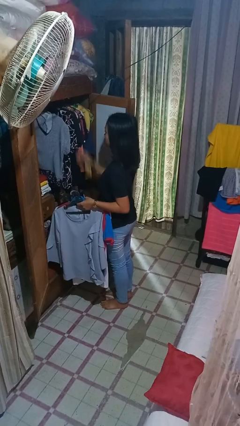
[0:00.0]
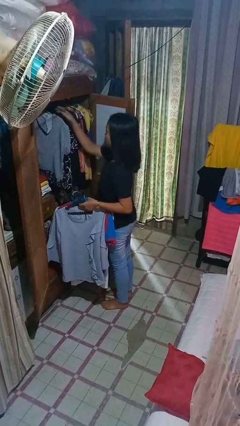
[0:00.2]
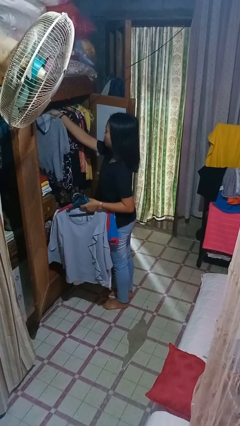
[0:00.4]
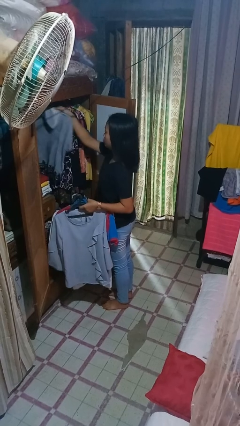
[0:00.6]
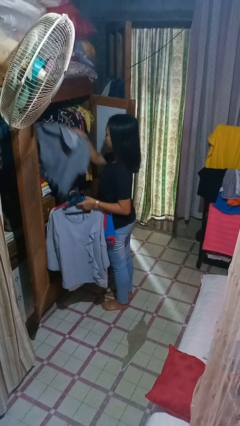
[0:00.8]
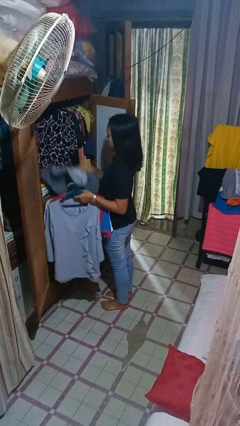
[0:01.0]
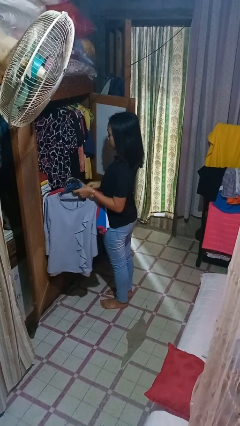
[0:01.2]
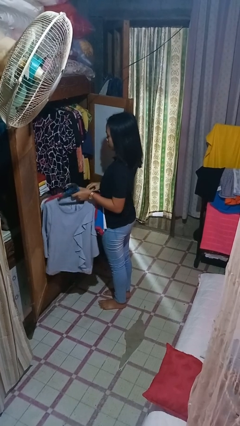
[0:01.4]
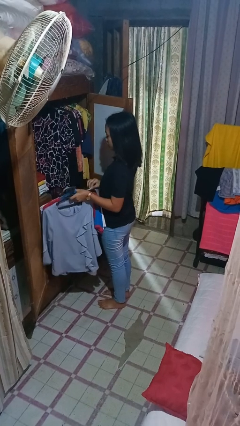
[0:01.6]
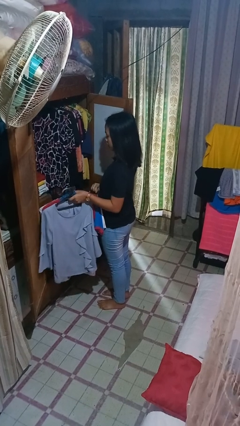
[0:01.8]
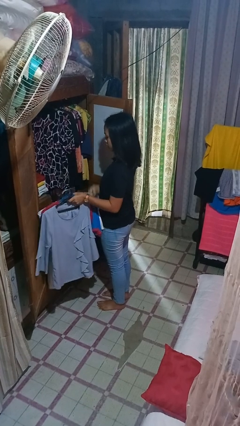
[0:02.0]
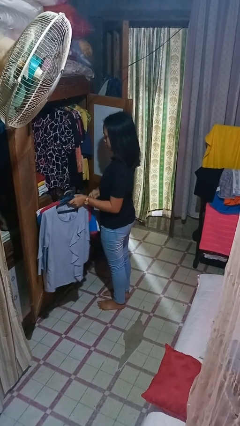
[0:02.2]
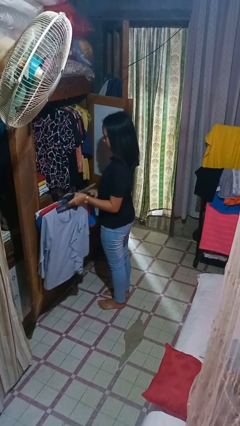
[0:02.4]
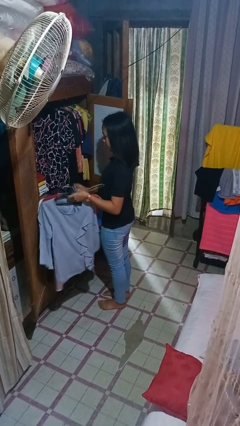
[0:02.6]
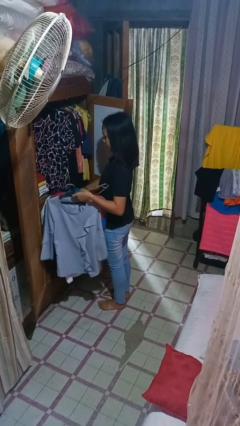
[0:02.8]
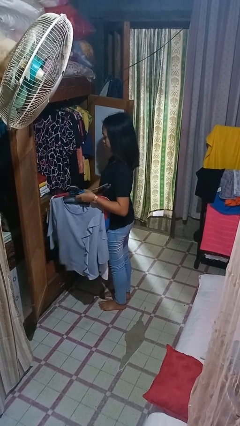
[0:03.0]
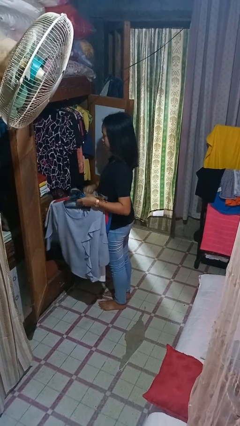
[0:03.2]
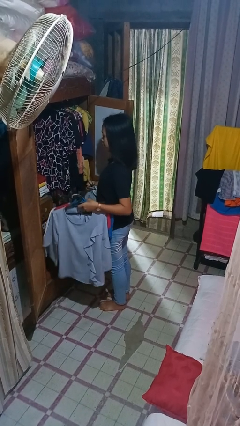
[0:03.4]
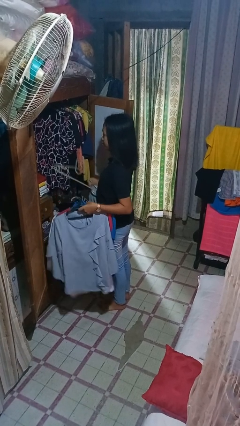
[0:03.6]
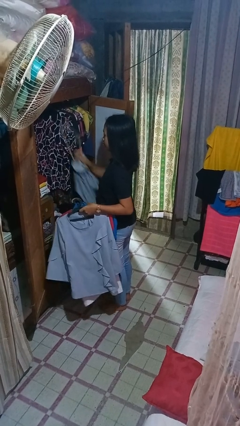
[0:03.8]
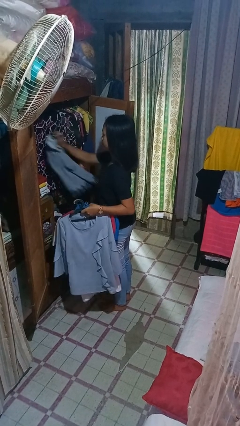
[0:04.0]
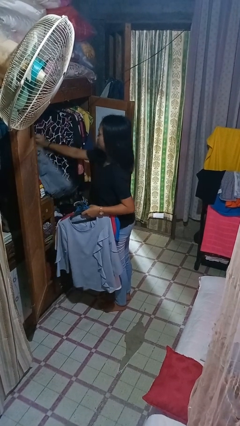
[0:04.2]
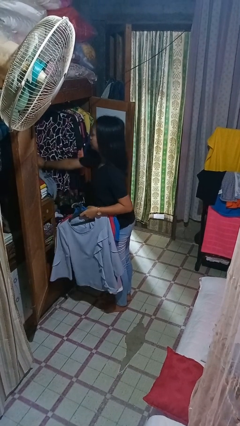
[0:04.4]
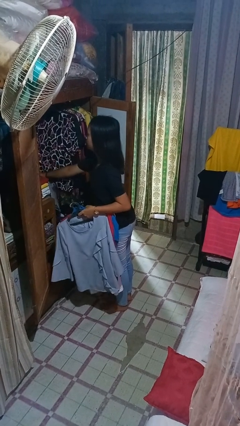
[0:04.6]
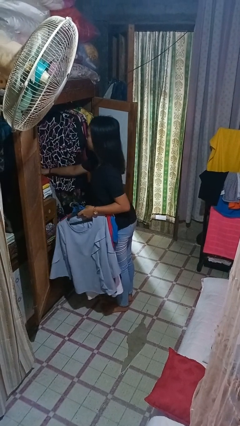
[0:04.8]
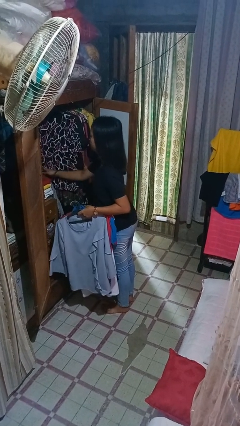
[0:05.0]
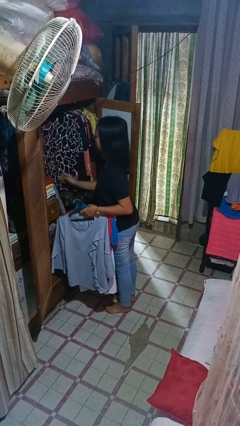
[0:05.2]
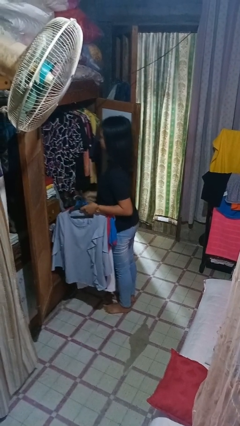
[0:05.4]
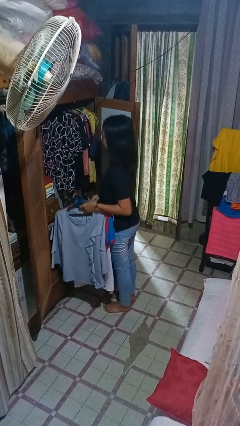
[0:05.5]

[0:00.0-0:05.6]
person takes clothes from closet

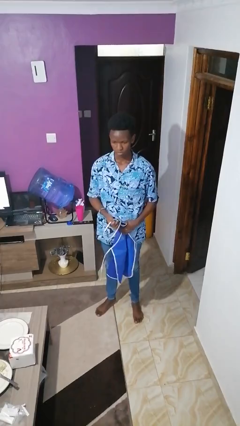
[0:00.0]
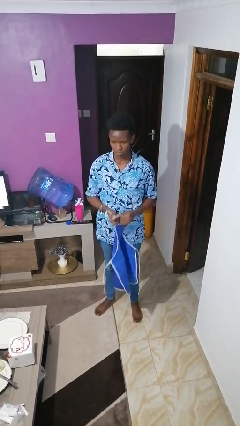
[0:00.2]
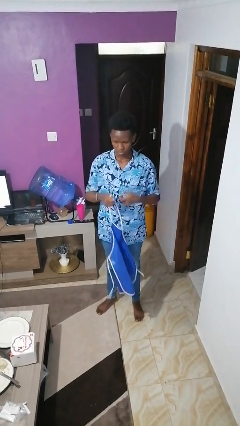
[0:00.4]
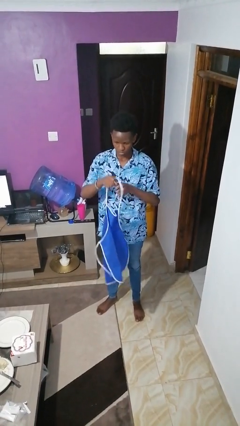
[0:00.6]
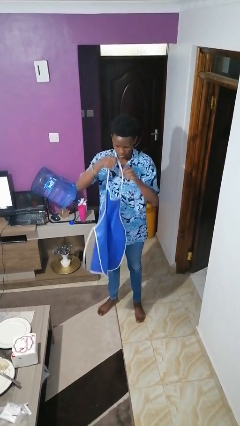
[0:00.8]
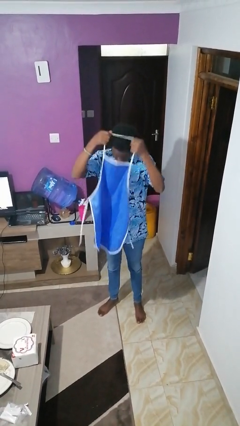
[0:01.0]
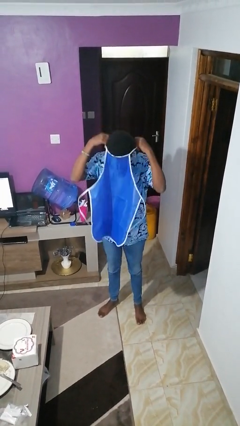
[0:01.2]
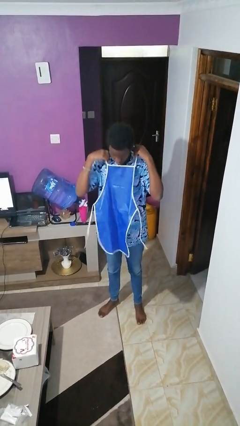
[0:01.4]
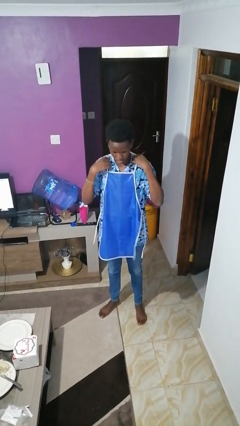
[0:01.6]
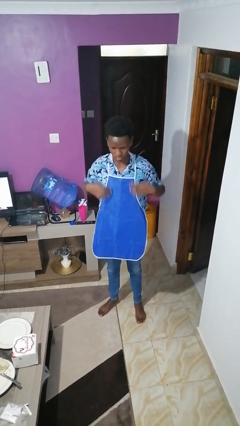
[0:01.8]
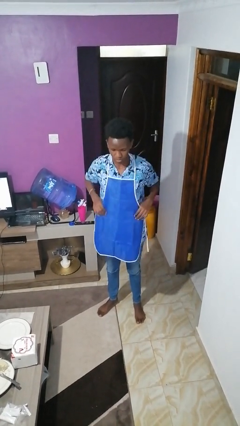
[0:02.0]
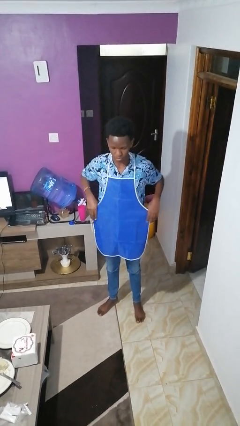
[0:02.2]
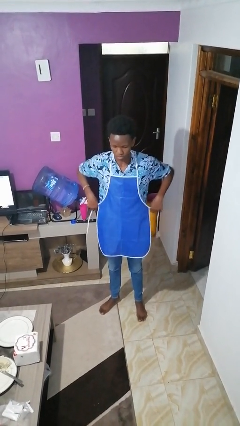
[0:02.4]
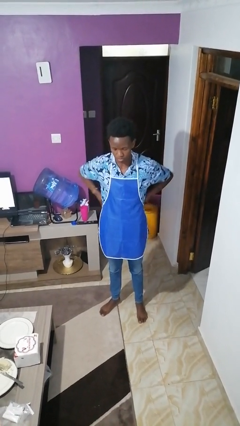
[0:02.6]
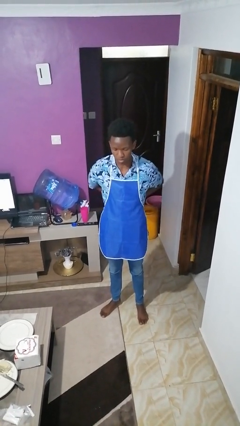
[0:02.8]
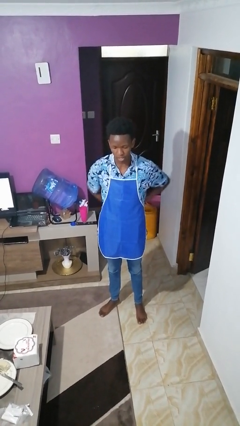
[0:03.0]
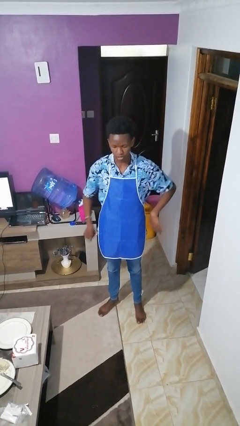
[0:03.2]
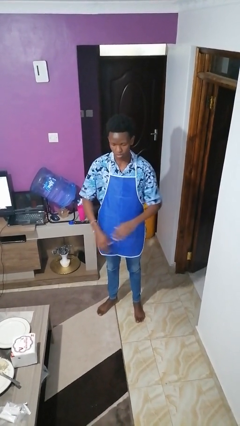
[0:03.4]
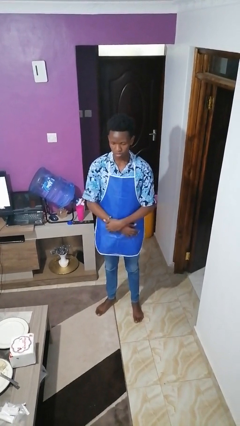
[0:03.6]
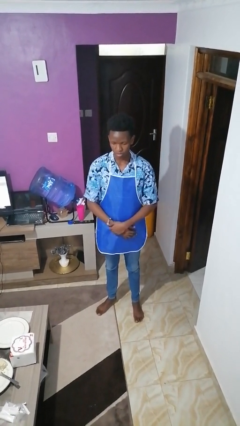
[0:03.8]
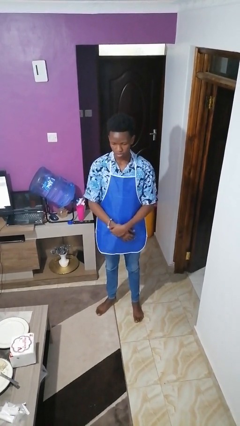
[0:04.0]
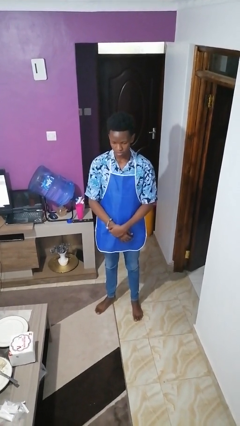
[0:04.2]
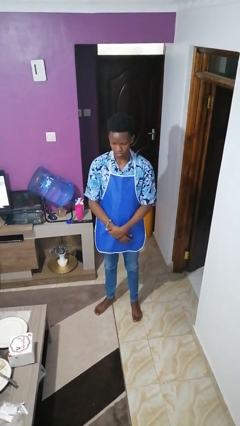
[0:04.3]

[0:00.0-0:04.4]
person puts on apron

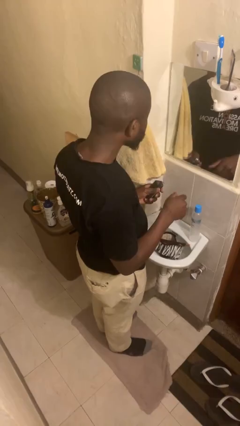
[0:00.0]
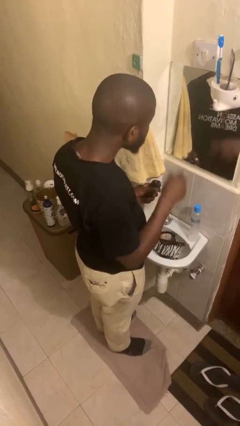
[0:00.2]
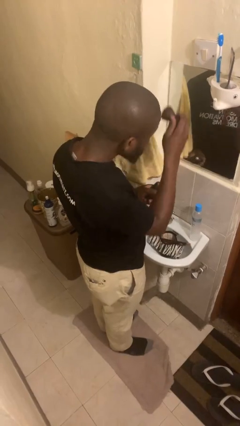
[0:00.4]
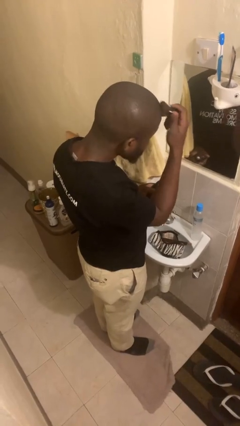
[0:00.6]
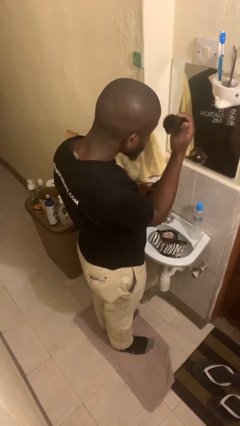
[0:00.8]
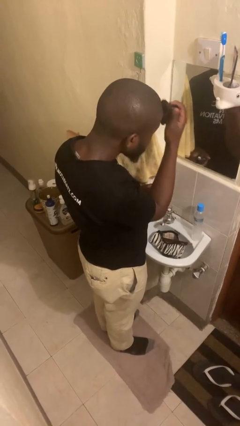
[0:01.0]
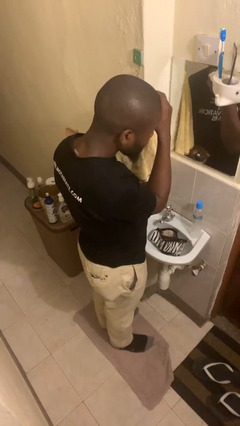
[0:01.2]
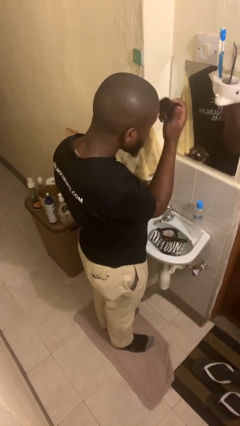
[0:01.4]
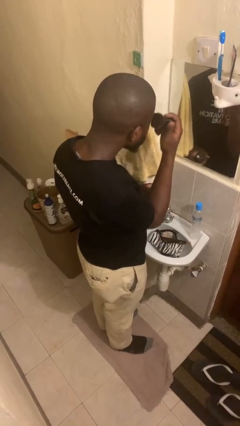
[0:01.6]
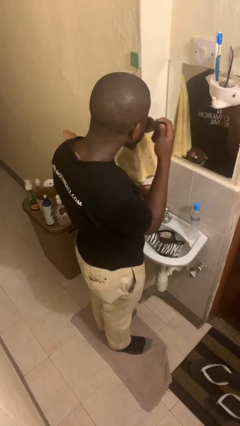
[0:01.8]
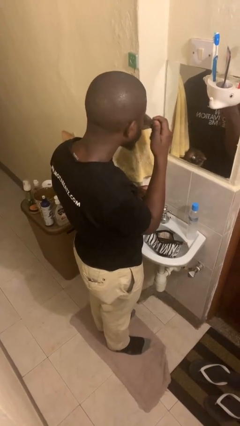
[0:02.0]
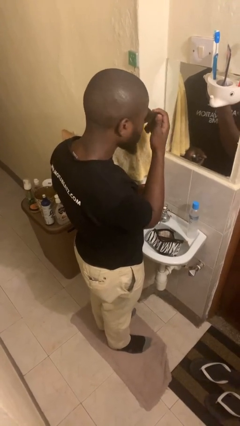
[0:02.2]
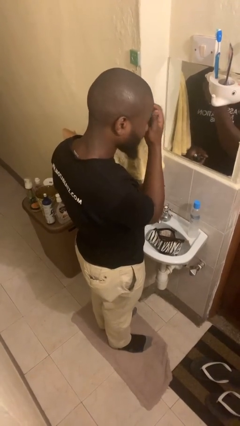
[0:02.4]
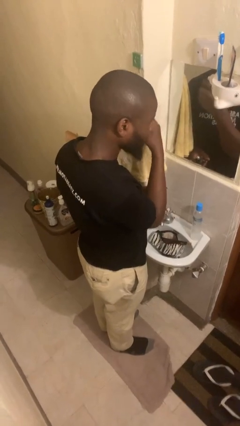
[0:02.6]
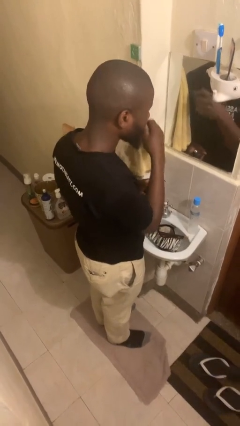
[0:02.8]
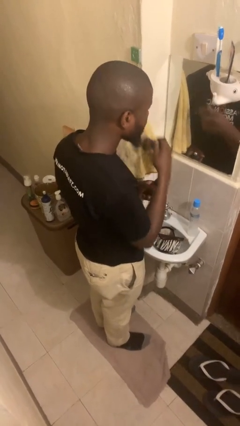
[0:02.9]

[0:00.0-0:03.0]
person applies foundation makeup

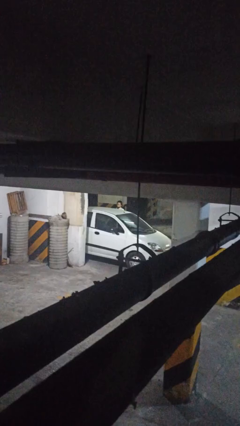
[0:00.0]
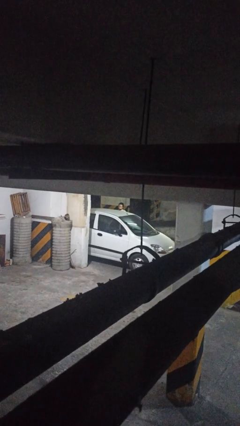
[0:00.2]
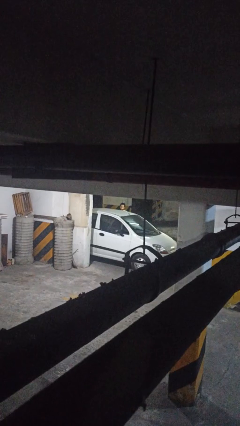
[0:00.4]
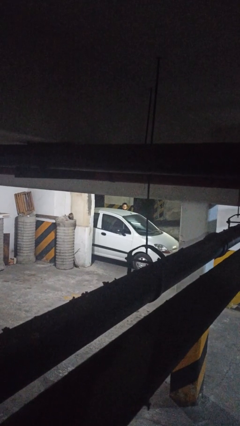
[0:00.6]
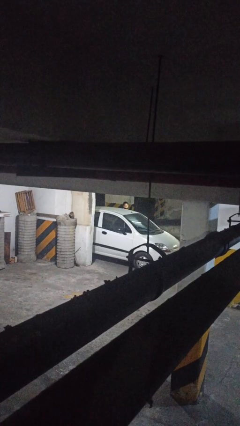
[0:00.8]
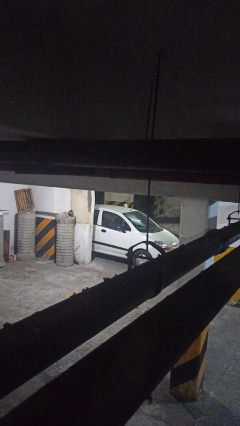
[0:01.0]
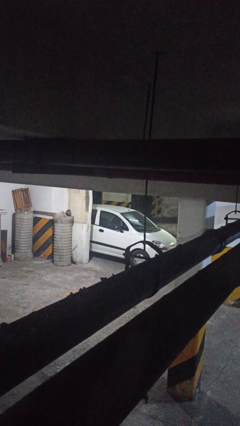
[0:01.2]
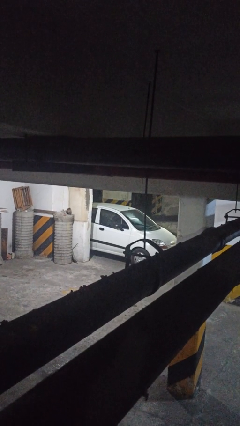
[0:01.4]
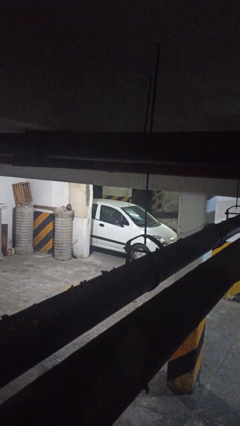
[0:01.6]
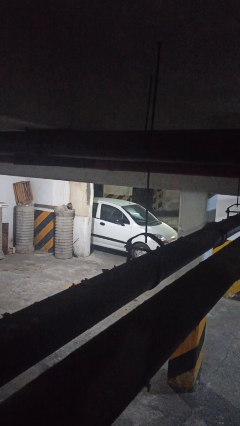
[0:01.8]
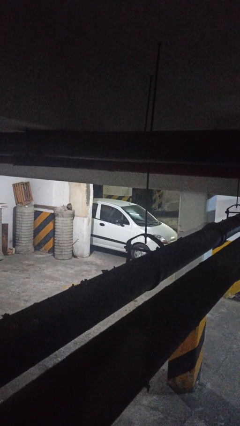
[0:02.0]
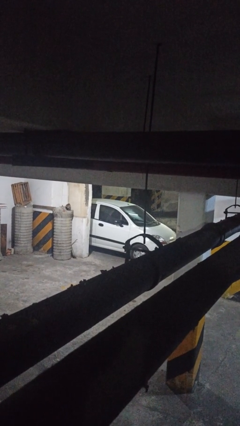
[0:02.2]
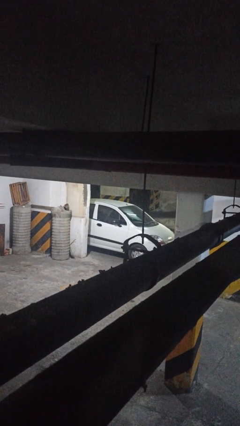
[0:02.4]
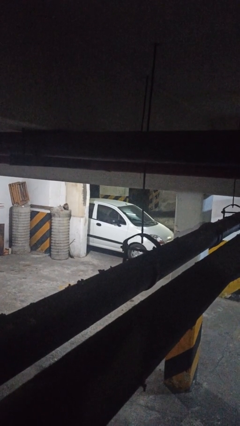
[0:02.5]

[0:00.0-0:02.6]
person enters car

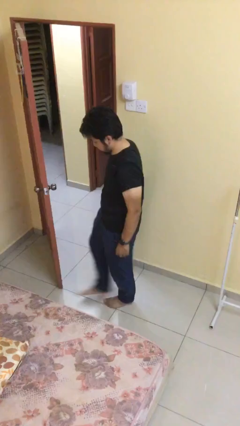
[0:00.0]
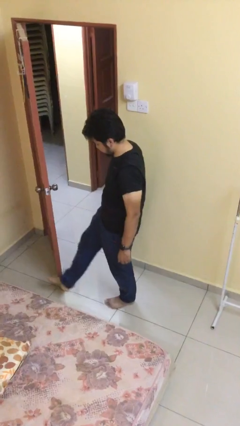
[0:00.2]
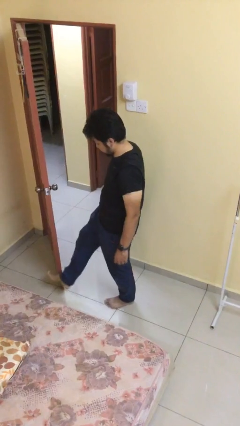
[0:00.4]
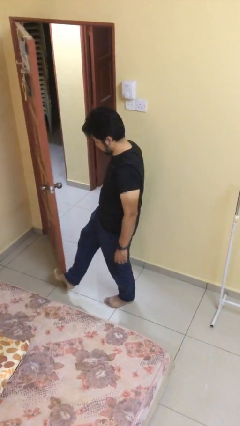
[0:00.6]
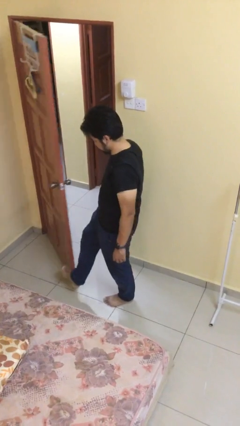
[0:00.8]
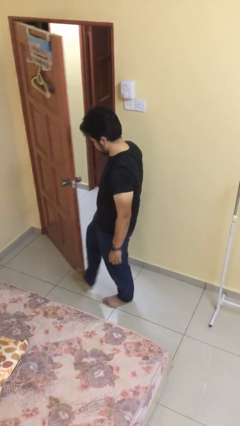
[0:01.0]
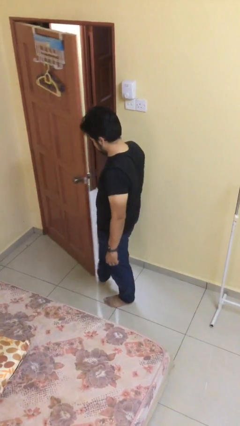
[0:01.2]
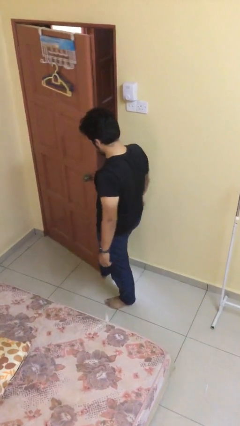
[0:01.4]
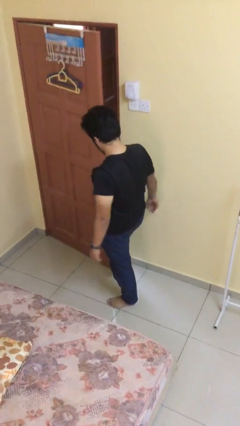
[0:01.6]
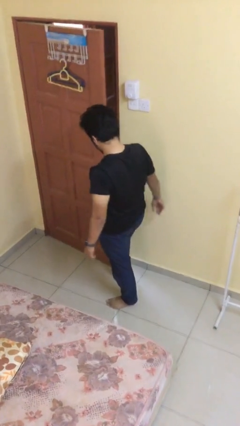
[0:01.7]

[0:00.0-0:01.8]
person closes door with foot

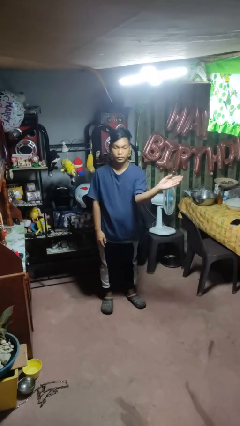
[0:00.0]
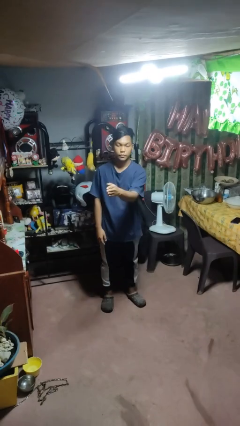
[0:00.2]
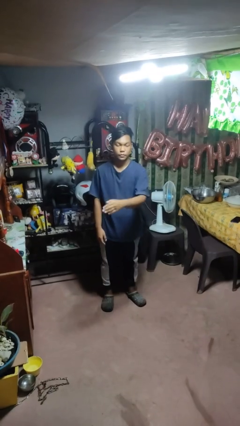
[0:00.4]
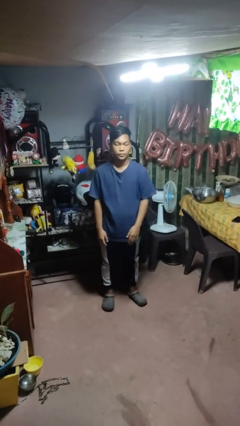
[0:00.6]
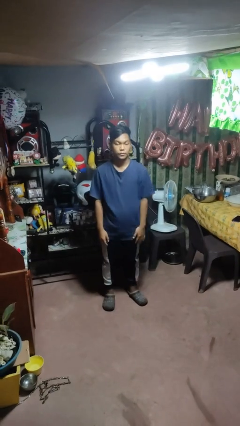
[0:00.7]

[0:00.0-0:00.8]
person gestures swipe right
